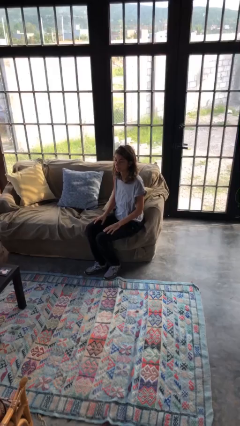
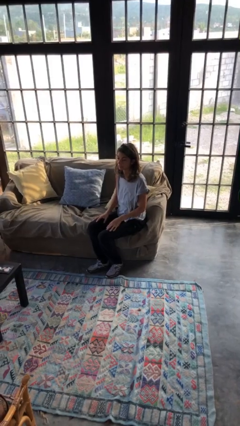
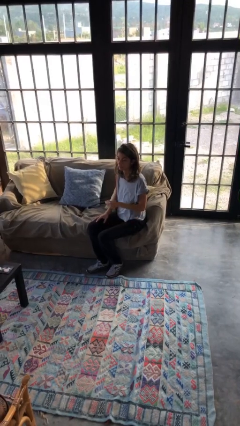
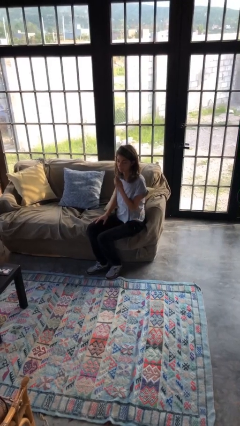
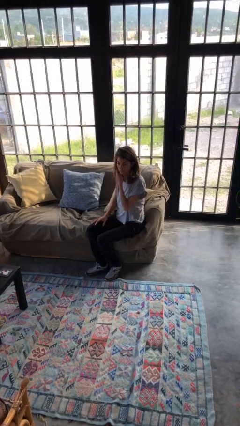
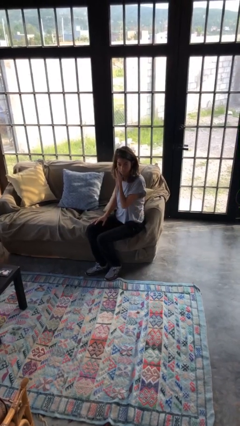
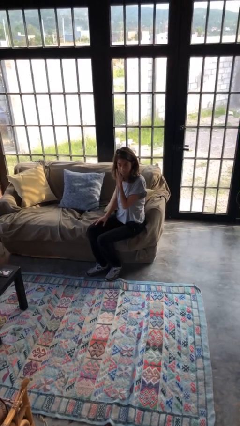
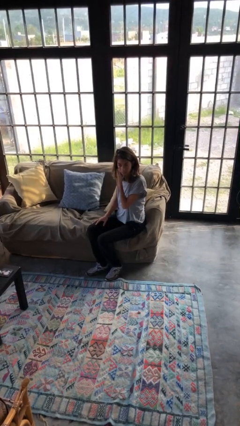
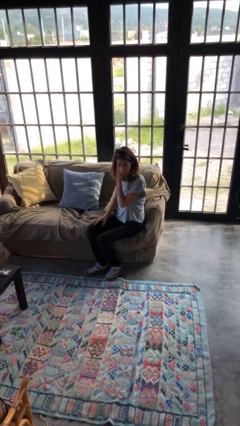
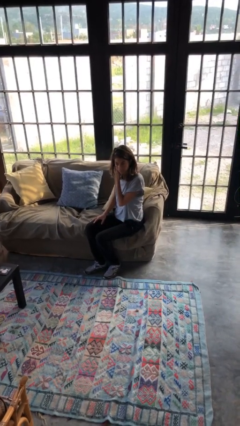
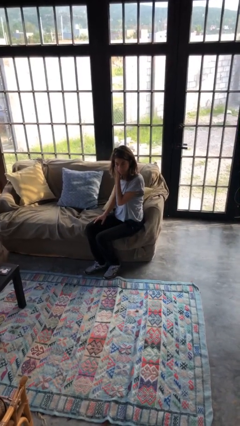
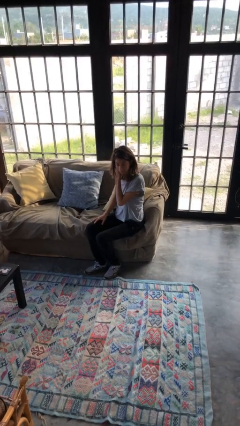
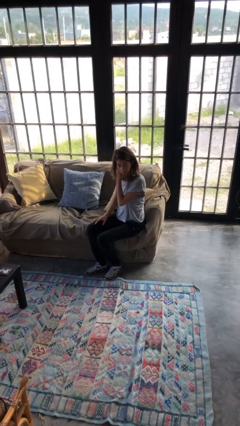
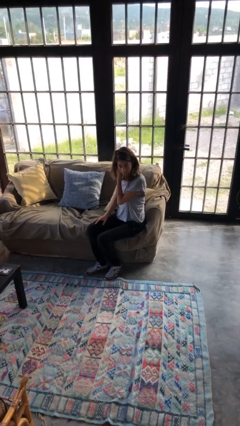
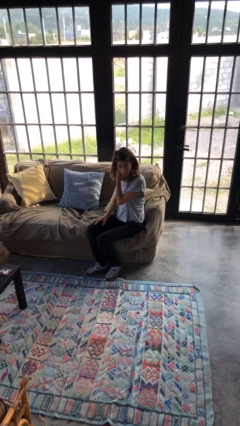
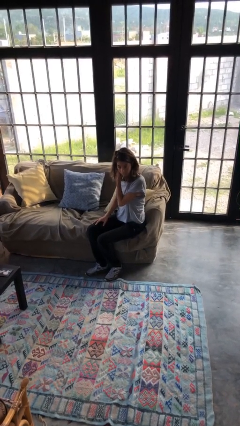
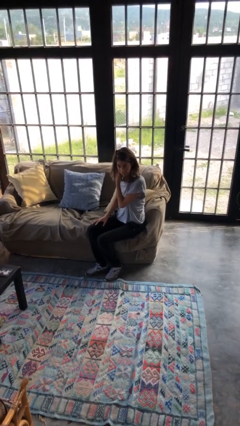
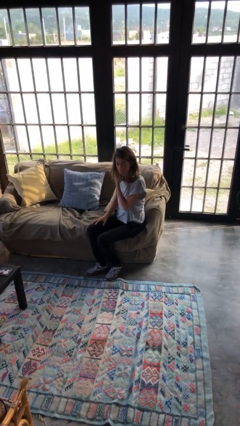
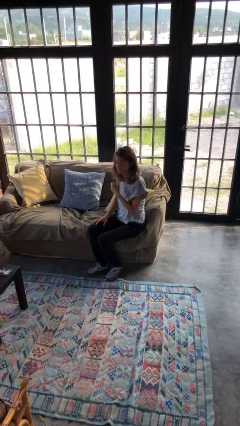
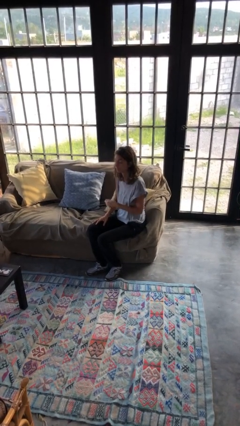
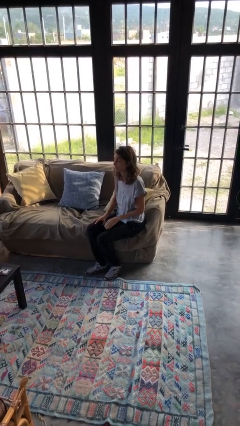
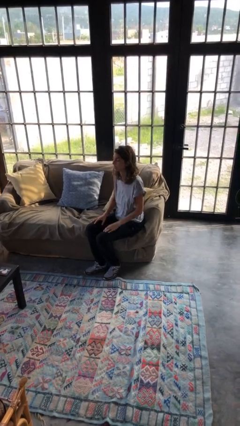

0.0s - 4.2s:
person scratches face

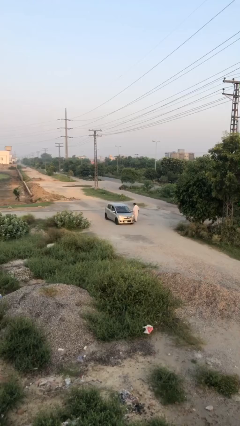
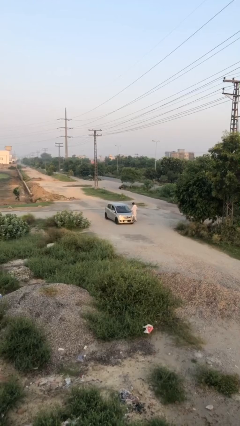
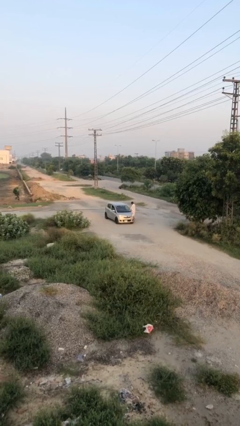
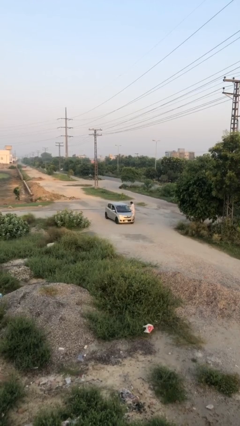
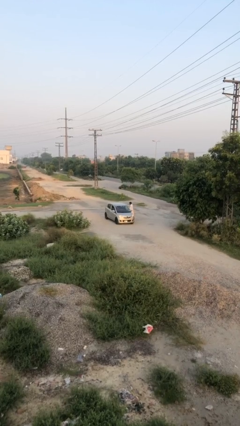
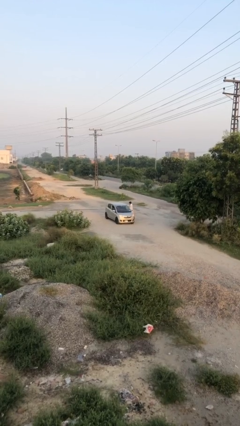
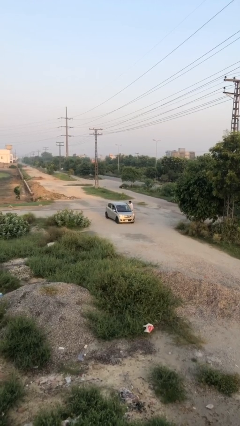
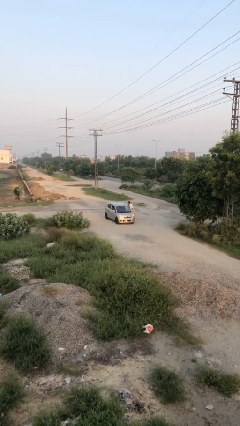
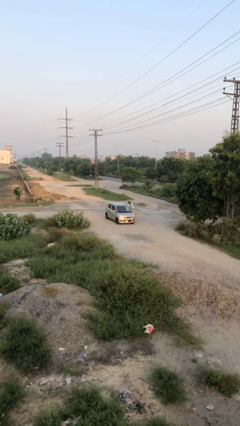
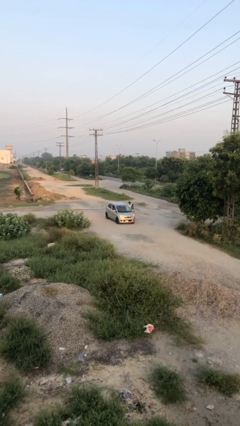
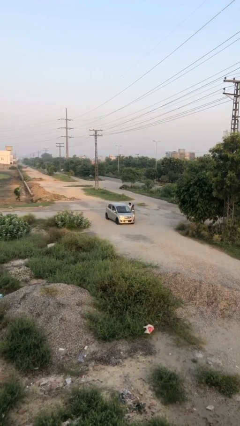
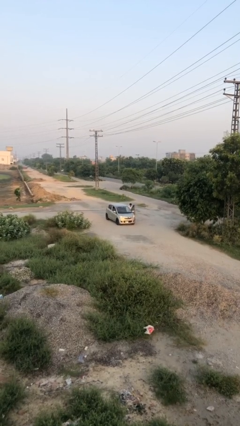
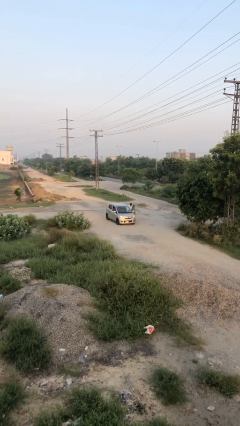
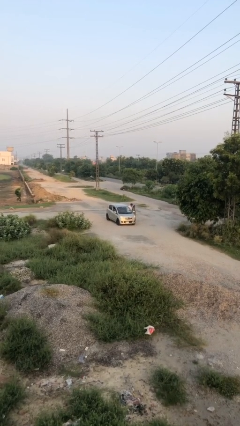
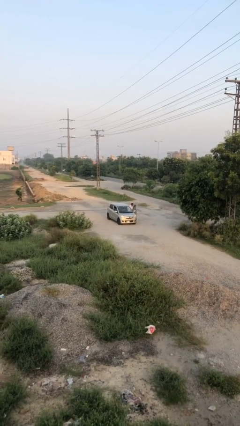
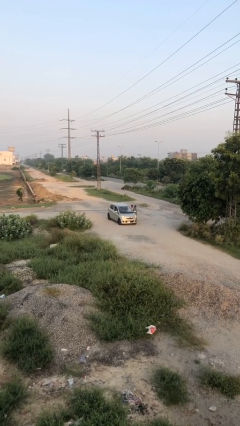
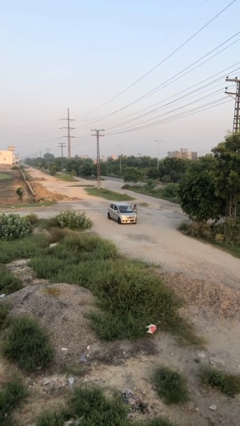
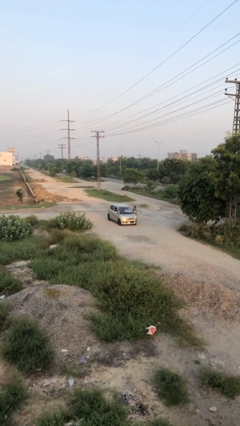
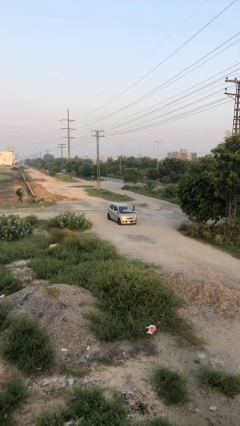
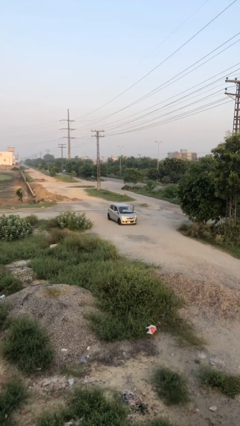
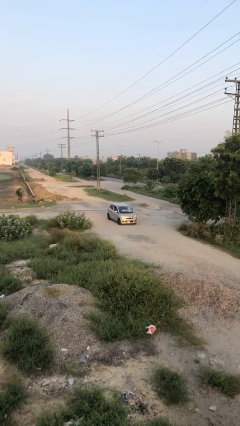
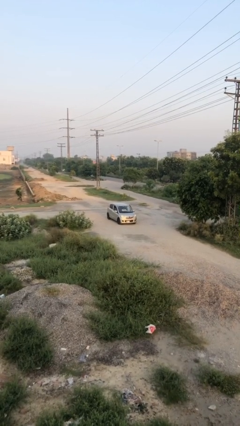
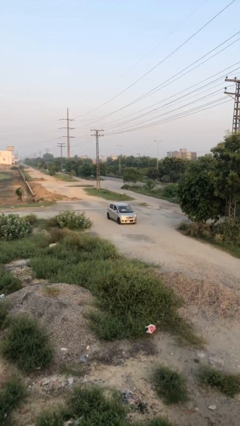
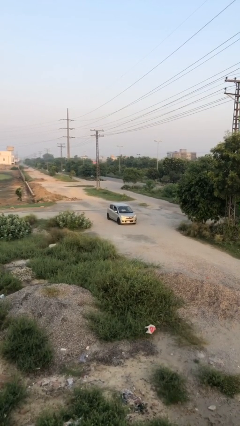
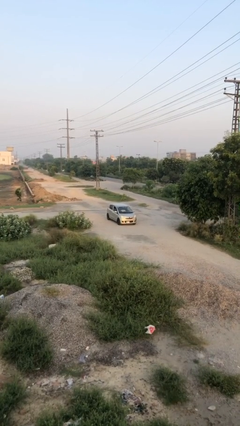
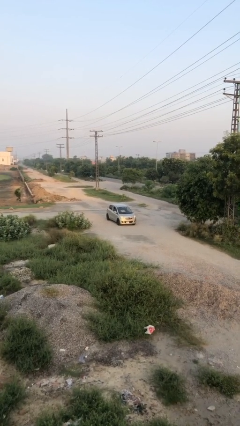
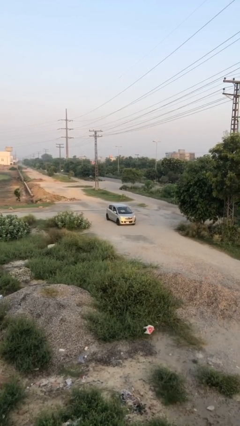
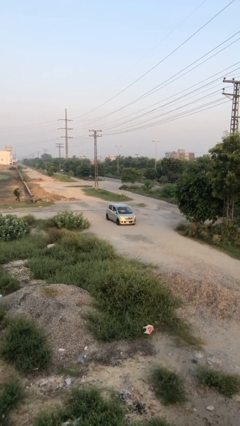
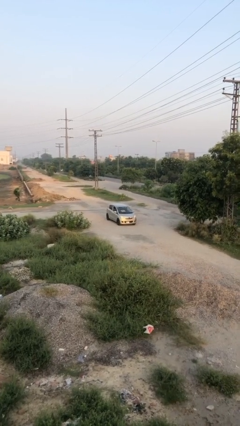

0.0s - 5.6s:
car picks up person

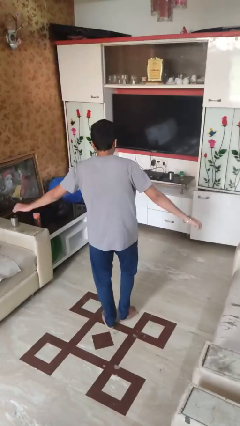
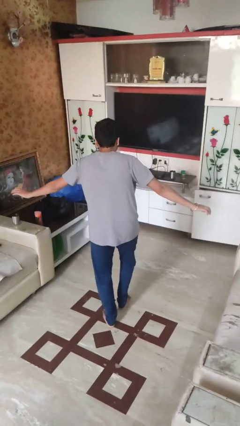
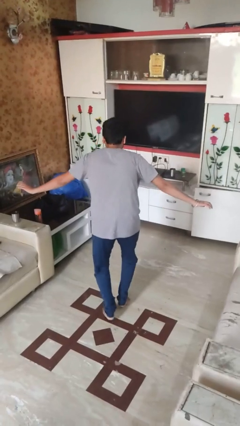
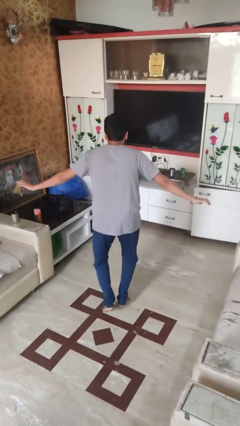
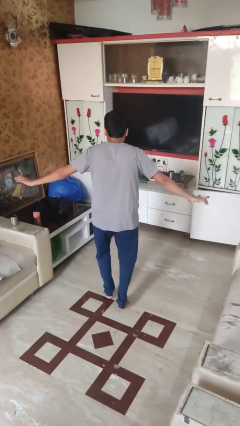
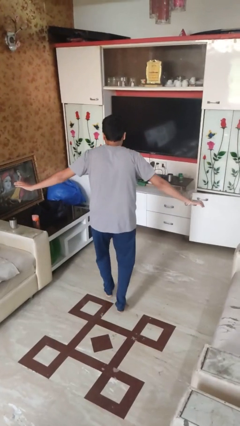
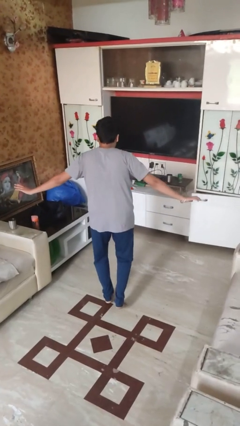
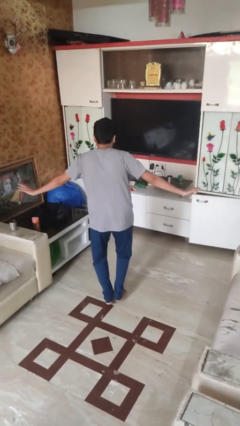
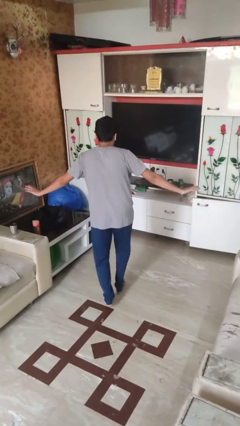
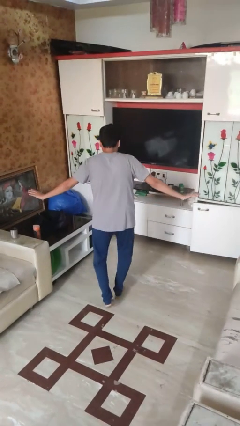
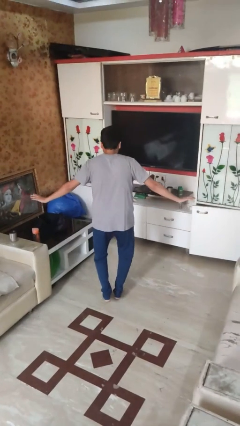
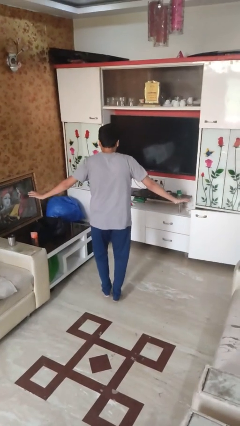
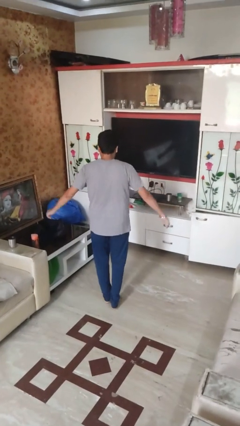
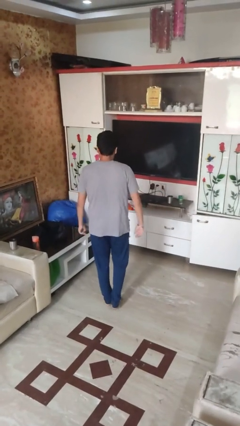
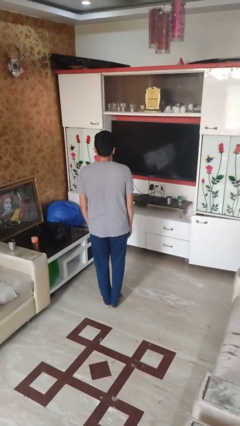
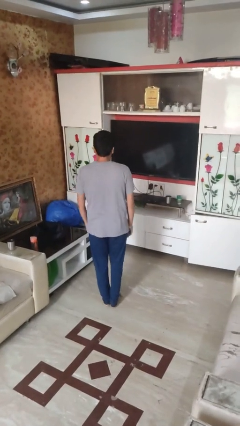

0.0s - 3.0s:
person walks tiptoe

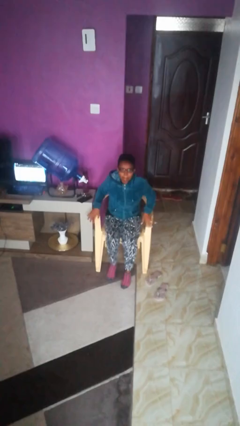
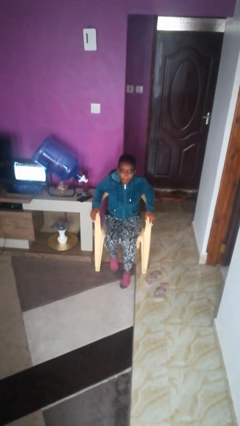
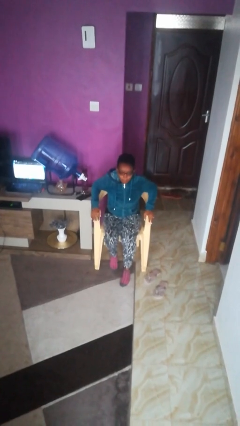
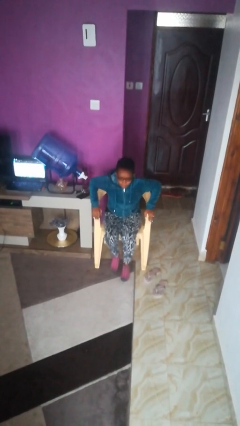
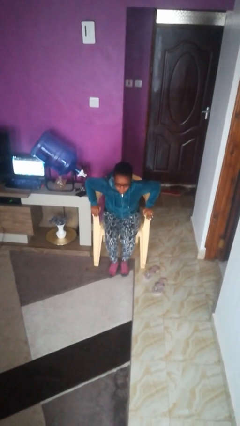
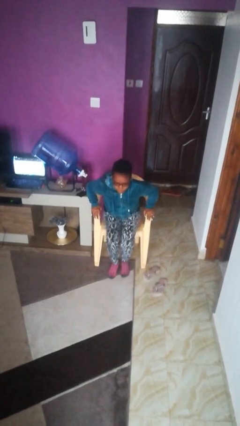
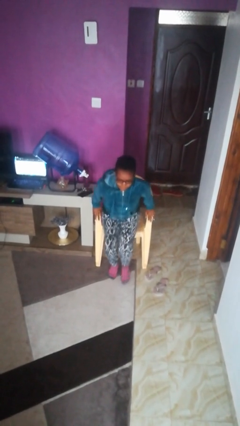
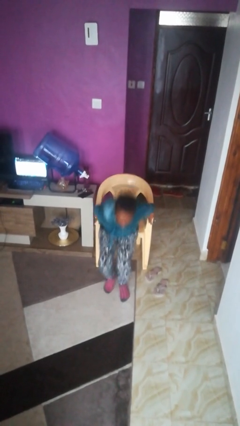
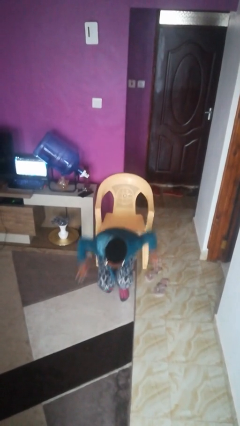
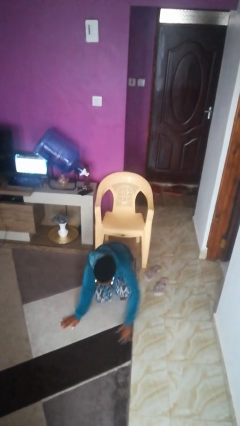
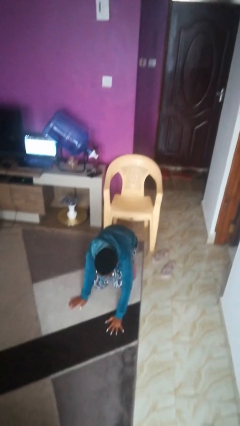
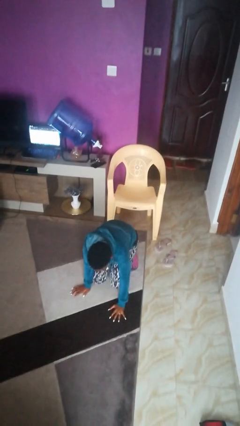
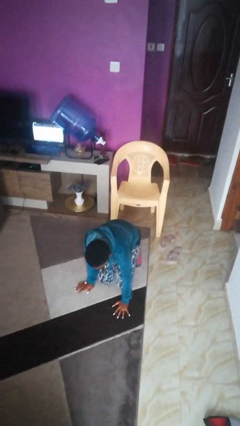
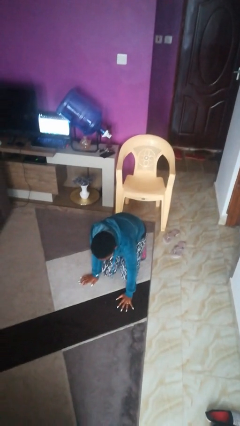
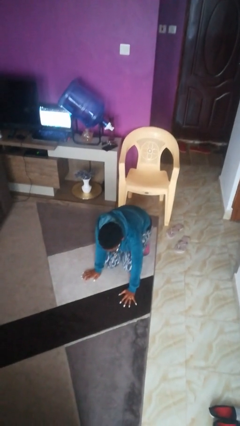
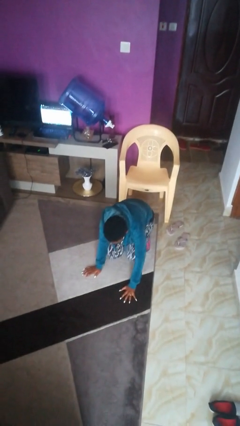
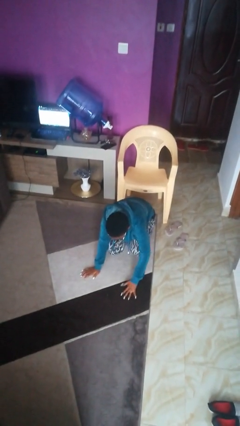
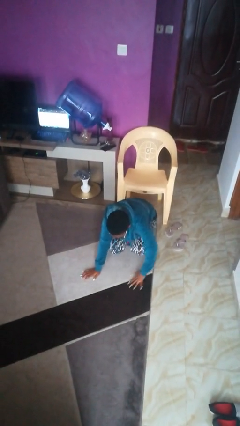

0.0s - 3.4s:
person falls from chair

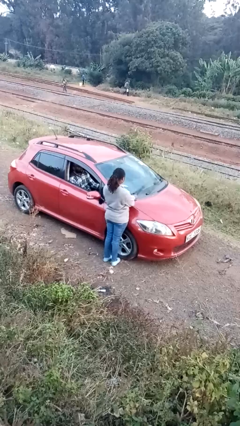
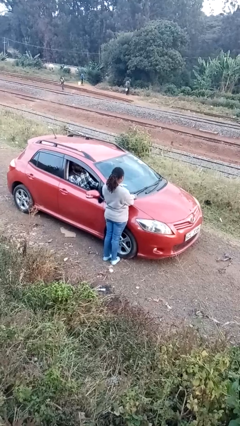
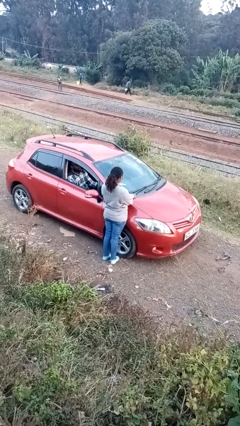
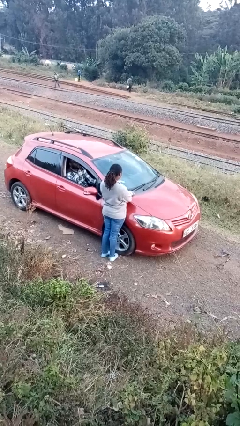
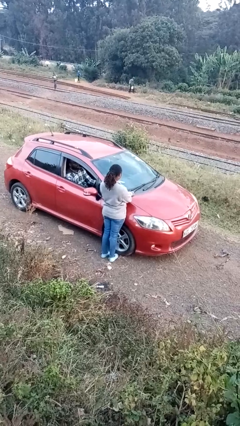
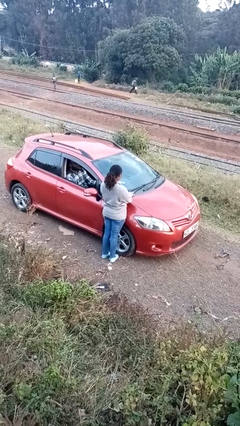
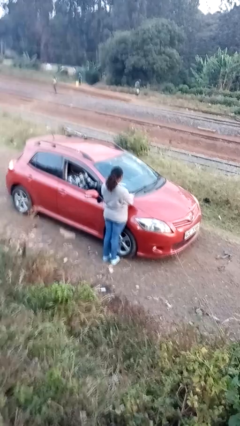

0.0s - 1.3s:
person flips down car wipers
